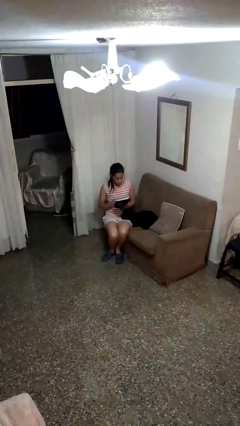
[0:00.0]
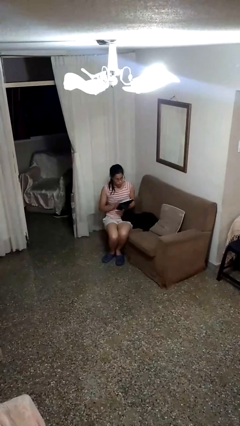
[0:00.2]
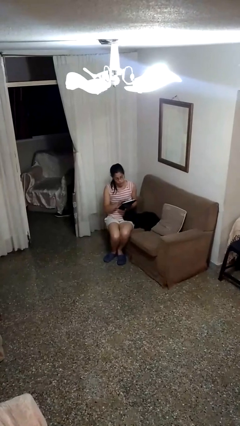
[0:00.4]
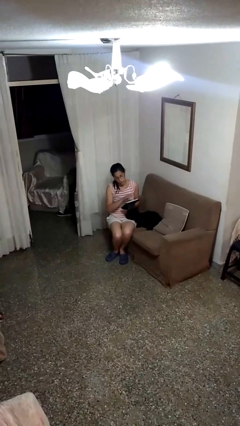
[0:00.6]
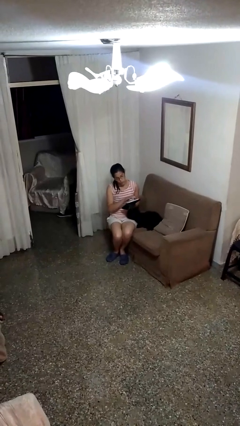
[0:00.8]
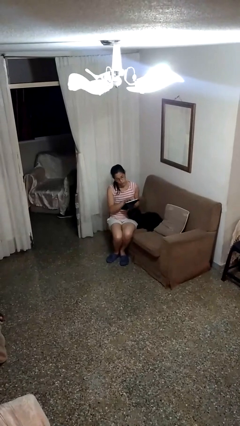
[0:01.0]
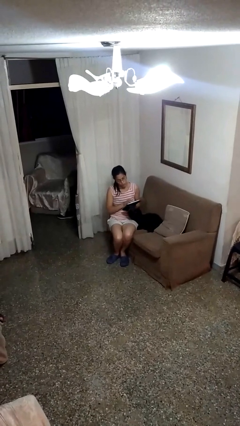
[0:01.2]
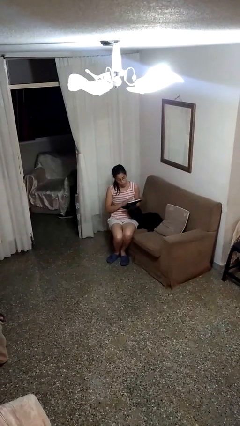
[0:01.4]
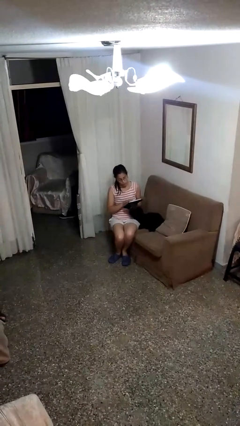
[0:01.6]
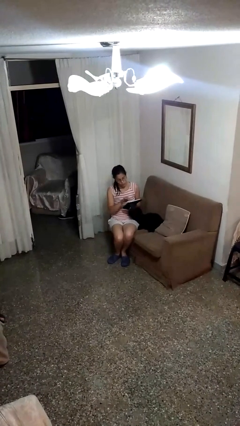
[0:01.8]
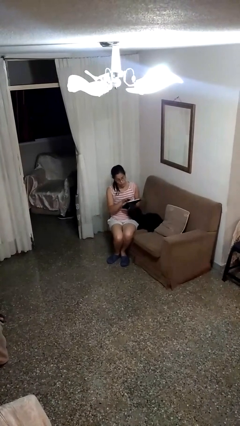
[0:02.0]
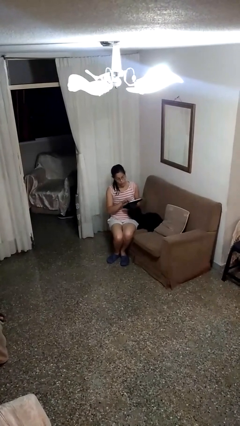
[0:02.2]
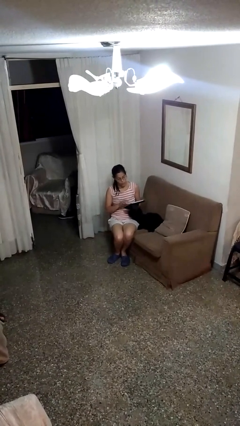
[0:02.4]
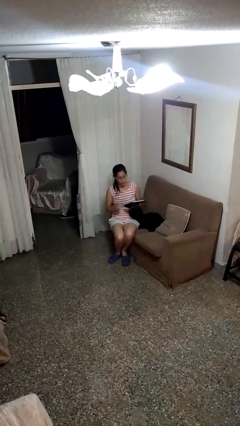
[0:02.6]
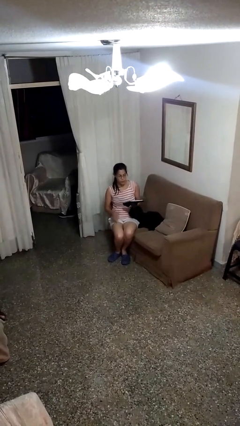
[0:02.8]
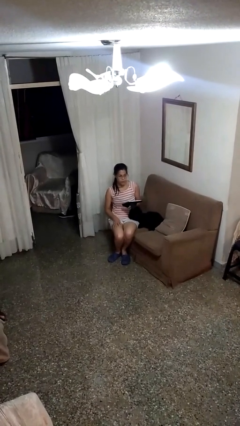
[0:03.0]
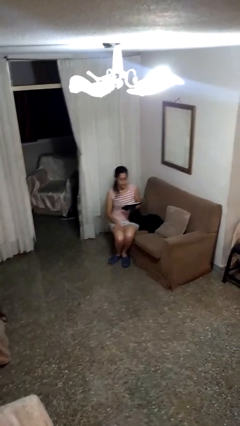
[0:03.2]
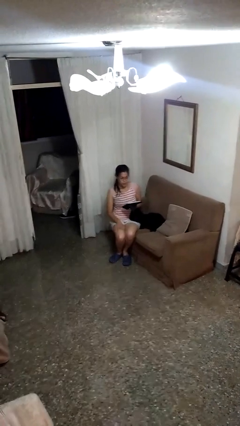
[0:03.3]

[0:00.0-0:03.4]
person interacts with tablet

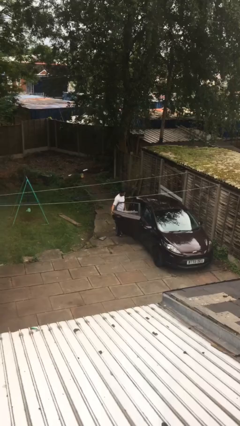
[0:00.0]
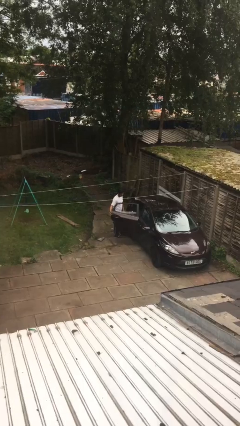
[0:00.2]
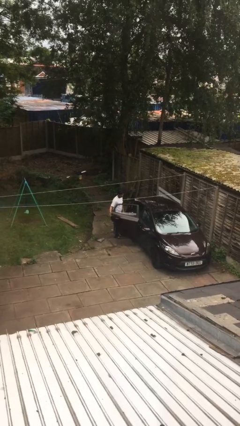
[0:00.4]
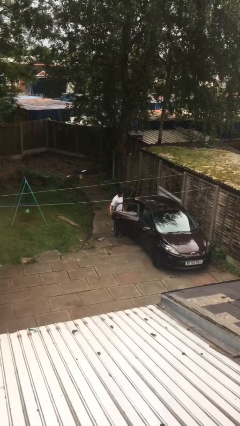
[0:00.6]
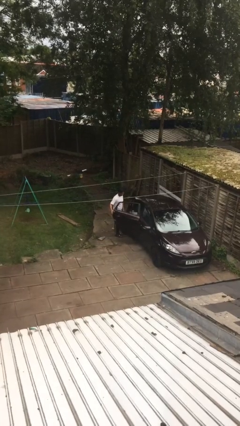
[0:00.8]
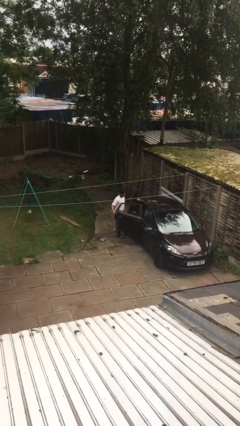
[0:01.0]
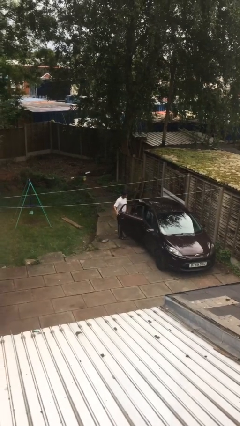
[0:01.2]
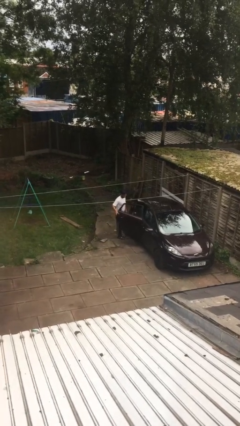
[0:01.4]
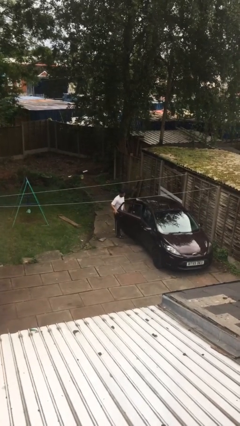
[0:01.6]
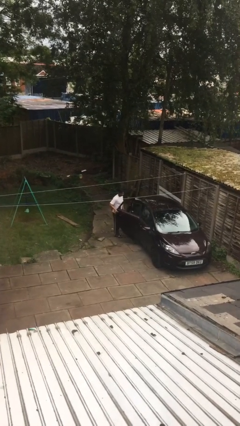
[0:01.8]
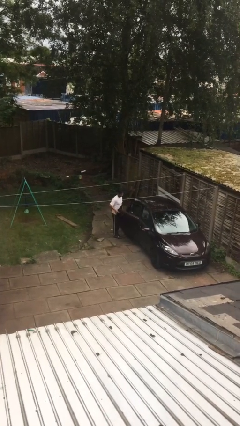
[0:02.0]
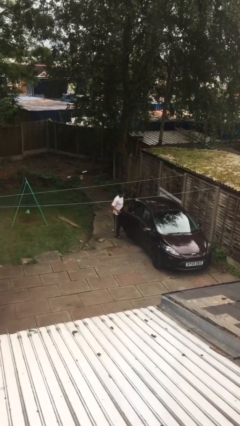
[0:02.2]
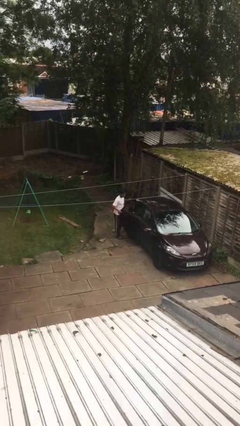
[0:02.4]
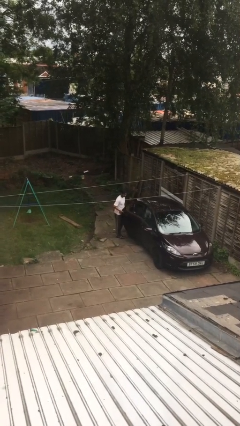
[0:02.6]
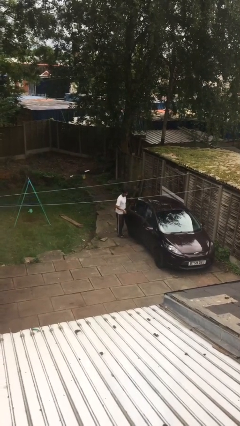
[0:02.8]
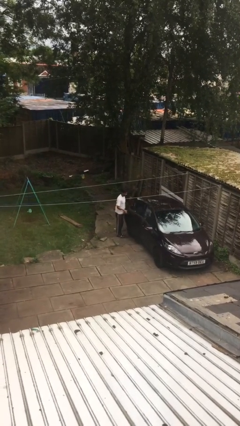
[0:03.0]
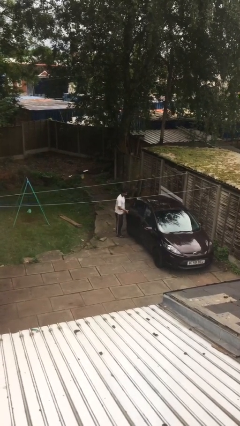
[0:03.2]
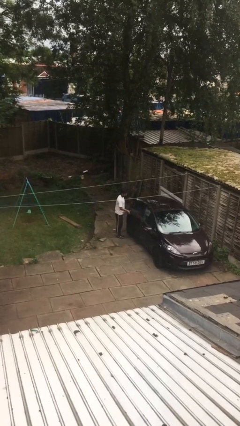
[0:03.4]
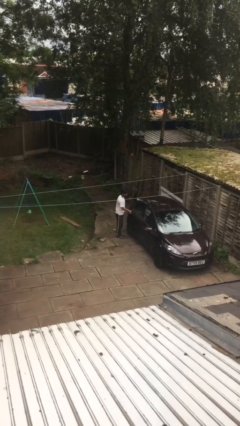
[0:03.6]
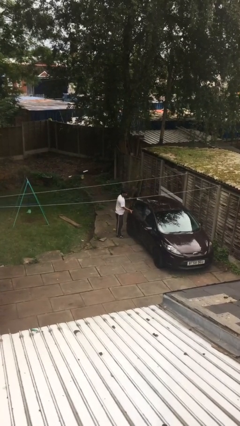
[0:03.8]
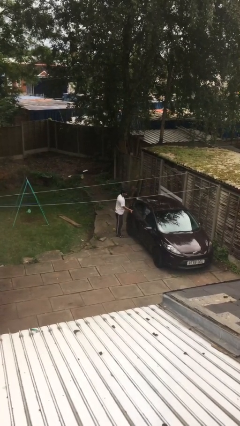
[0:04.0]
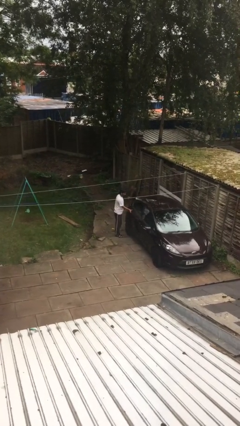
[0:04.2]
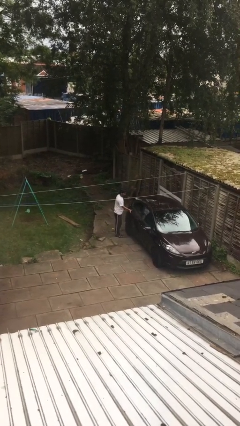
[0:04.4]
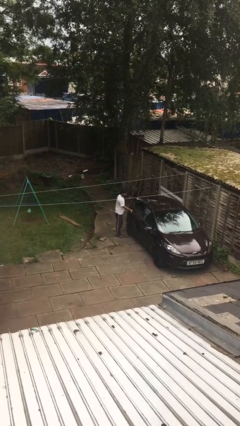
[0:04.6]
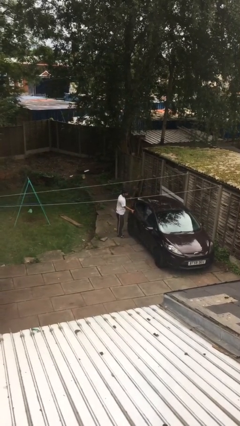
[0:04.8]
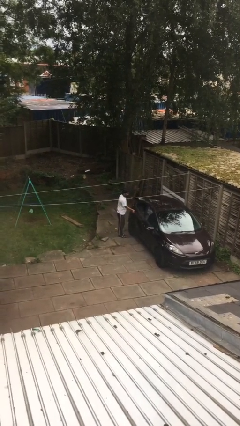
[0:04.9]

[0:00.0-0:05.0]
person closes car door

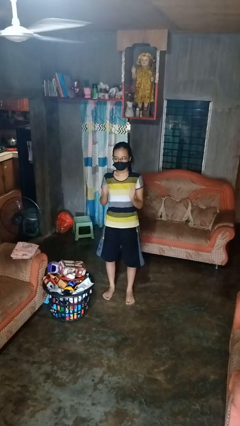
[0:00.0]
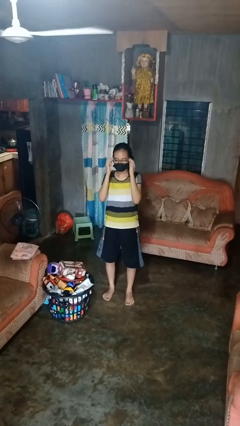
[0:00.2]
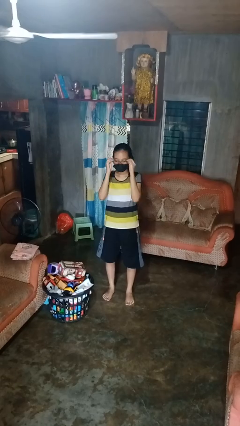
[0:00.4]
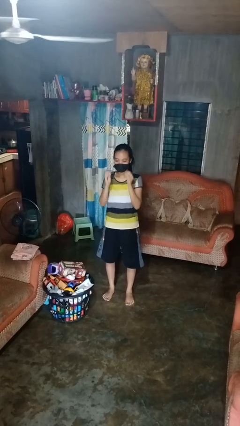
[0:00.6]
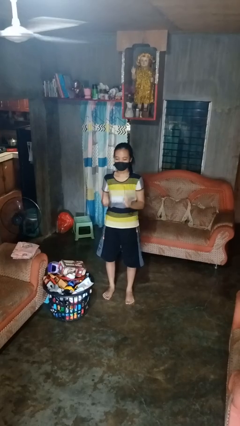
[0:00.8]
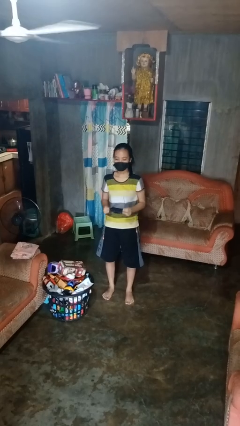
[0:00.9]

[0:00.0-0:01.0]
person takes off glasses

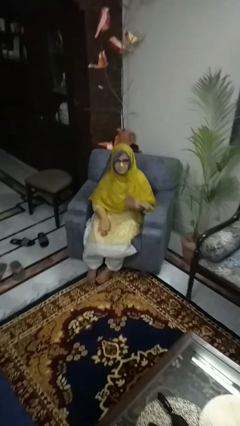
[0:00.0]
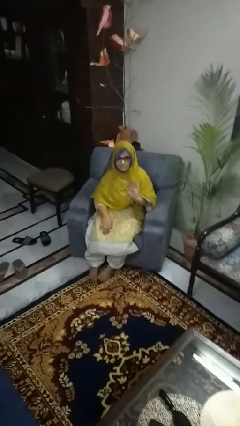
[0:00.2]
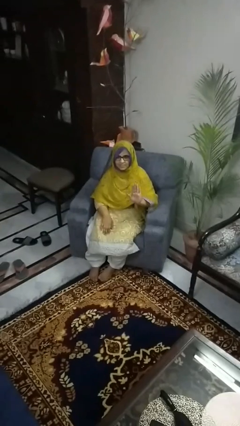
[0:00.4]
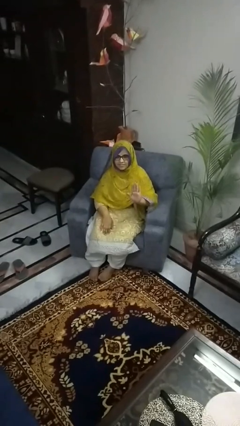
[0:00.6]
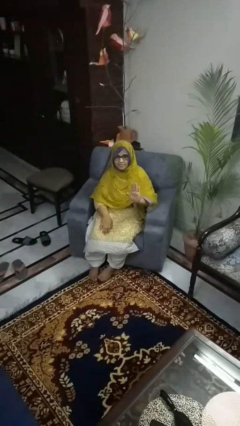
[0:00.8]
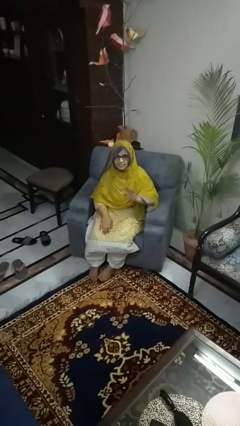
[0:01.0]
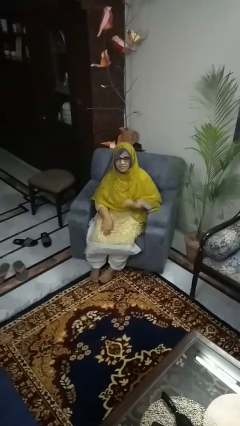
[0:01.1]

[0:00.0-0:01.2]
person gestures stop

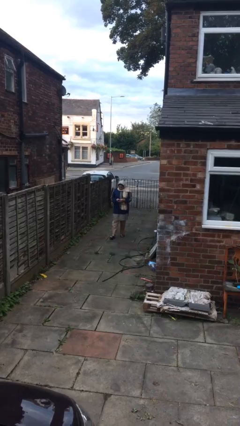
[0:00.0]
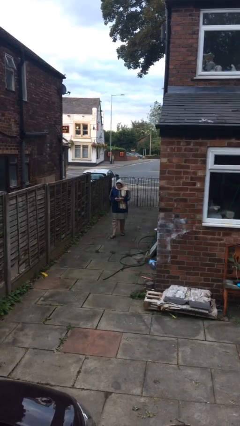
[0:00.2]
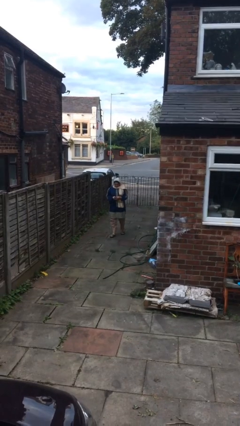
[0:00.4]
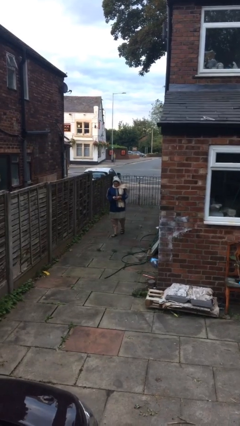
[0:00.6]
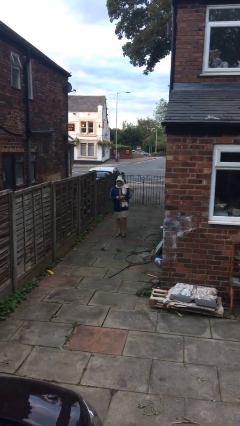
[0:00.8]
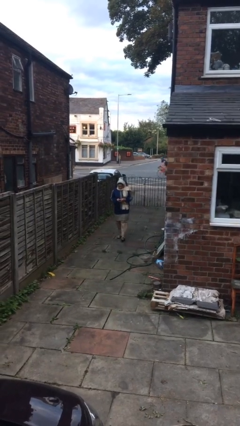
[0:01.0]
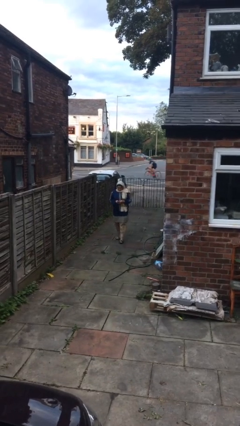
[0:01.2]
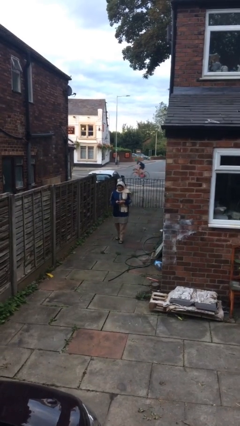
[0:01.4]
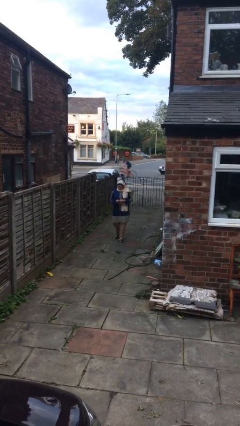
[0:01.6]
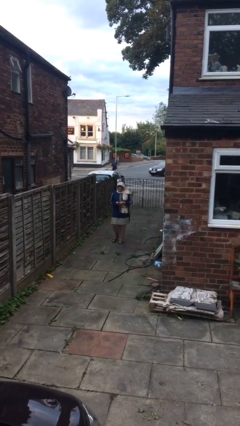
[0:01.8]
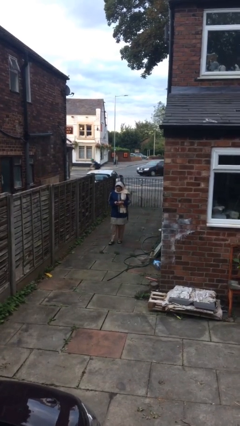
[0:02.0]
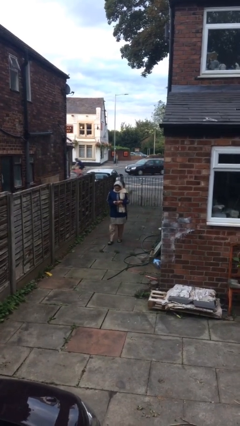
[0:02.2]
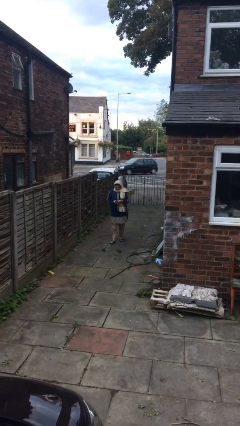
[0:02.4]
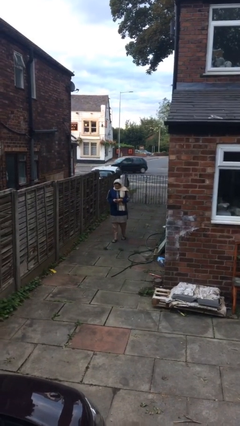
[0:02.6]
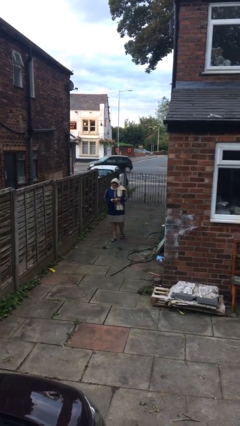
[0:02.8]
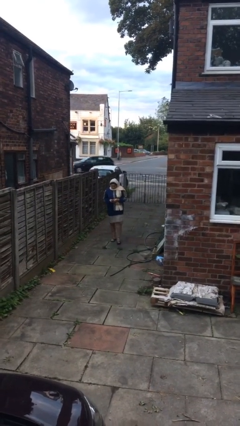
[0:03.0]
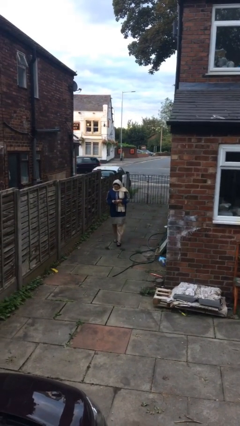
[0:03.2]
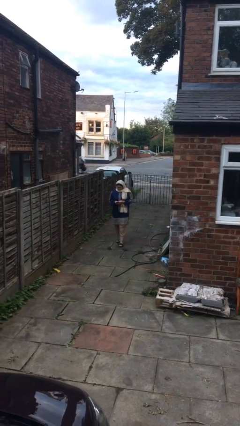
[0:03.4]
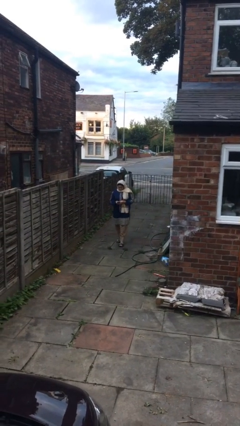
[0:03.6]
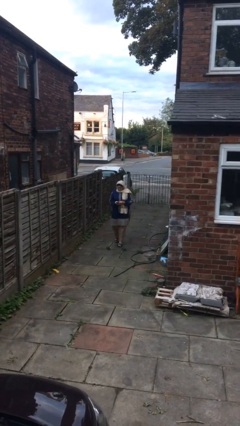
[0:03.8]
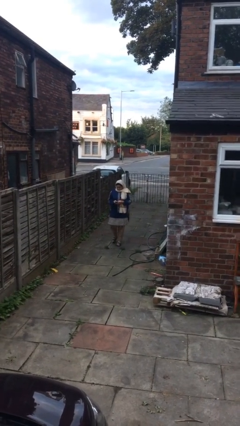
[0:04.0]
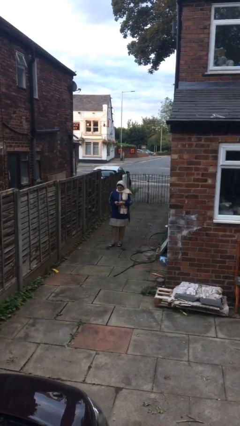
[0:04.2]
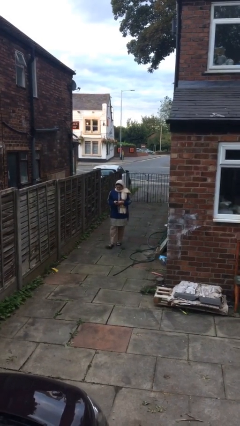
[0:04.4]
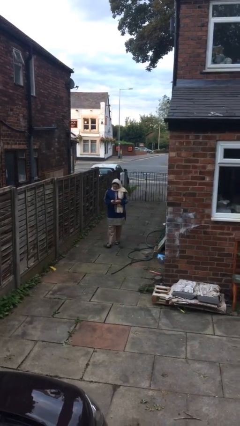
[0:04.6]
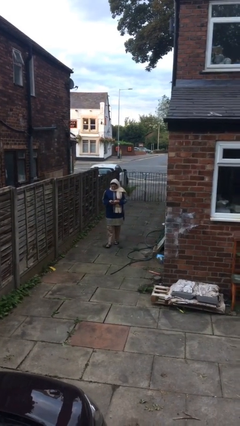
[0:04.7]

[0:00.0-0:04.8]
person texts on phone

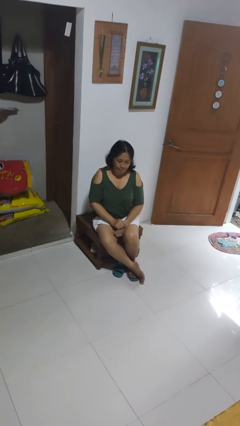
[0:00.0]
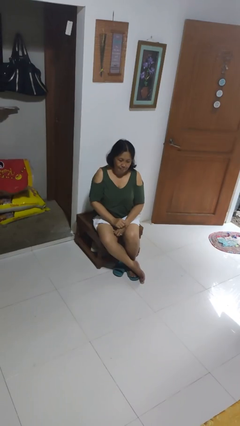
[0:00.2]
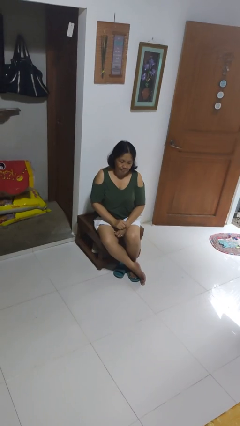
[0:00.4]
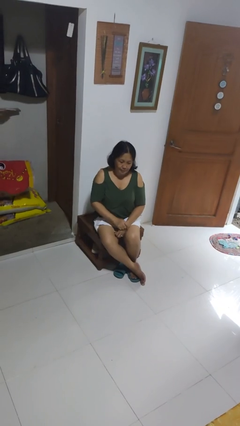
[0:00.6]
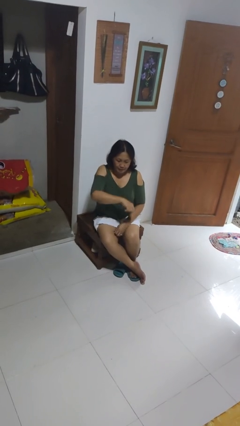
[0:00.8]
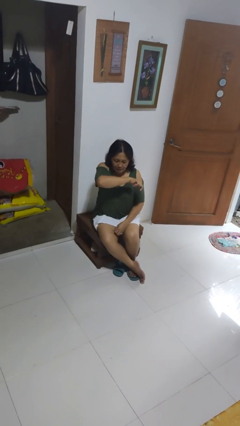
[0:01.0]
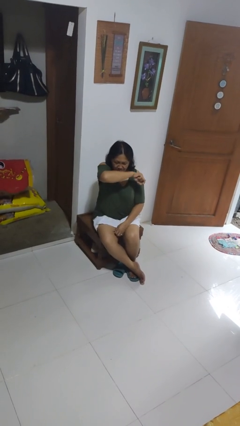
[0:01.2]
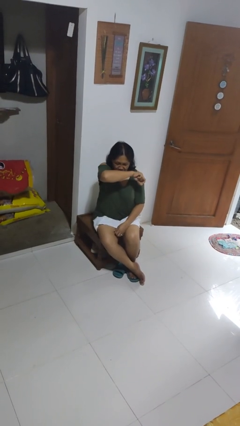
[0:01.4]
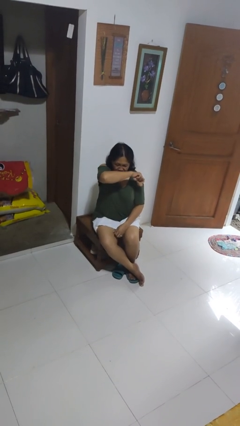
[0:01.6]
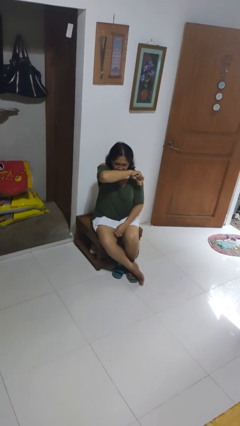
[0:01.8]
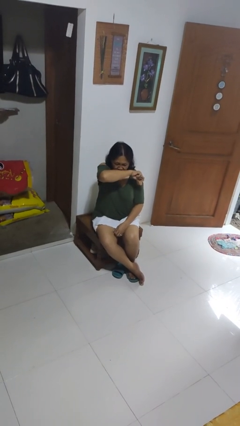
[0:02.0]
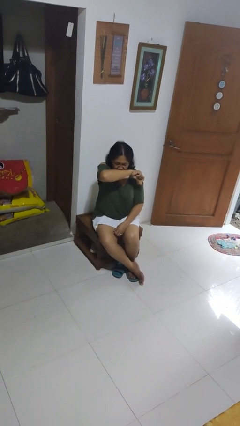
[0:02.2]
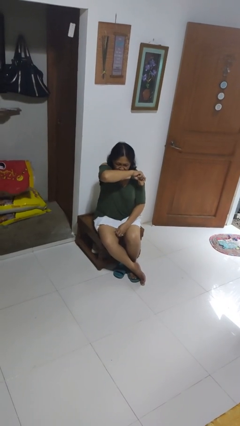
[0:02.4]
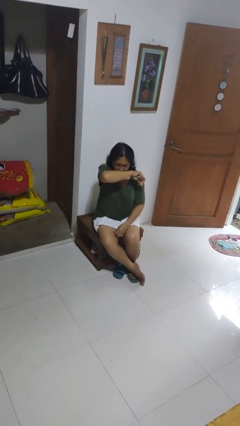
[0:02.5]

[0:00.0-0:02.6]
person sneezes into arm
